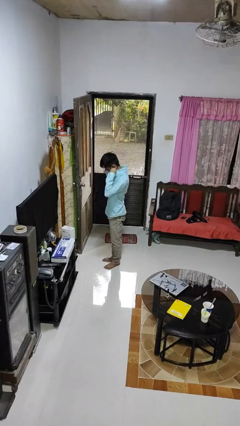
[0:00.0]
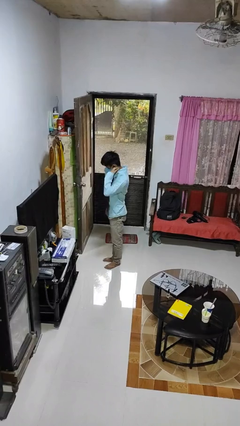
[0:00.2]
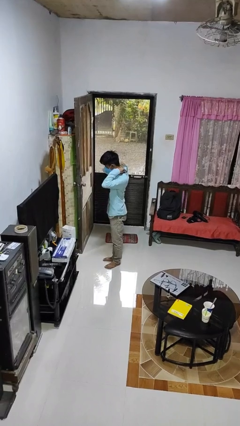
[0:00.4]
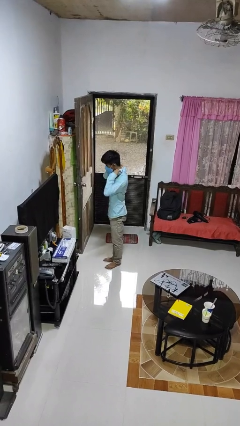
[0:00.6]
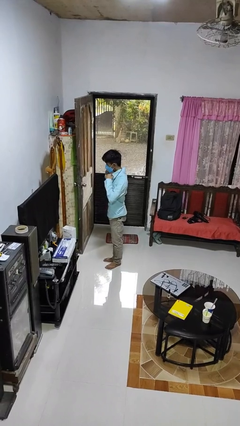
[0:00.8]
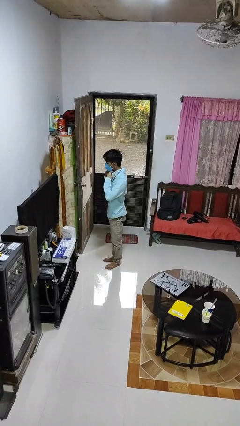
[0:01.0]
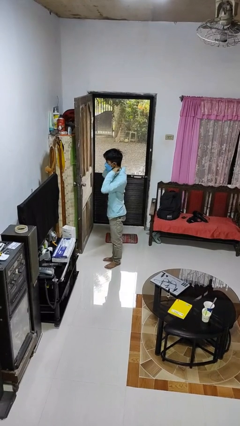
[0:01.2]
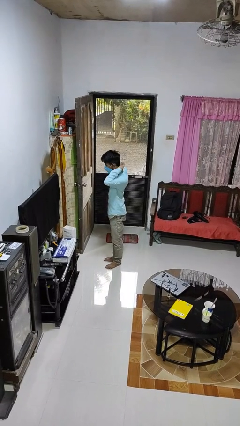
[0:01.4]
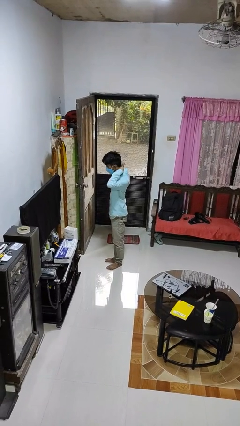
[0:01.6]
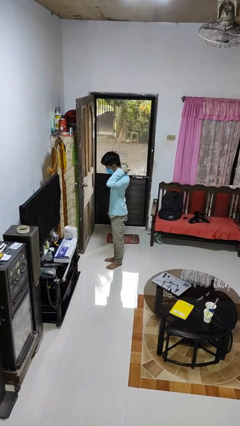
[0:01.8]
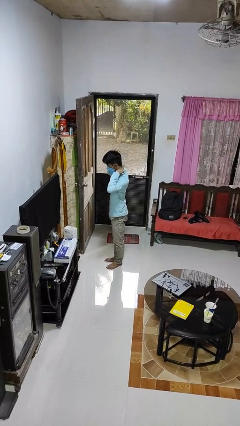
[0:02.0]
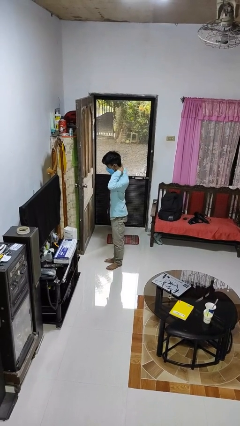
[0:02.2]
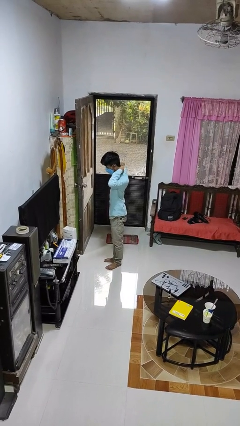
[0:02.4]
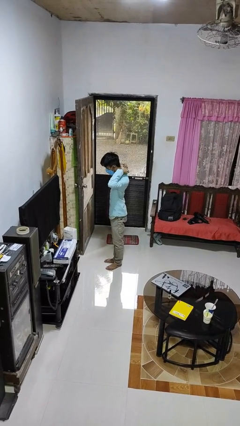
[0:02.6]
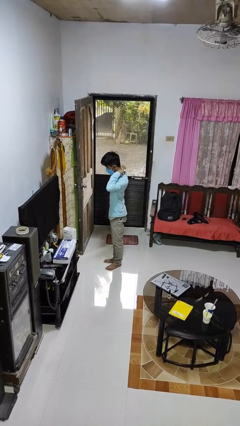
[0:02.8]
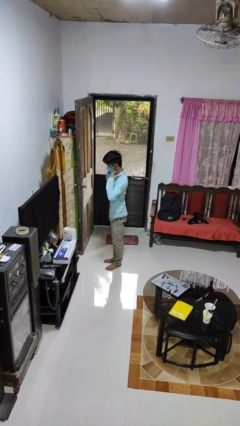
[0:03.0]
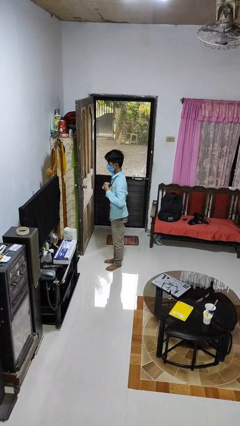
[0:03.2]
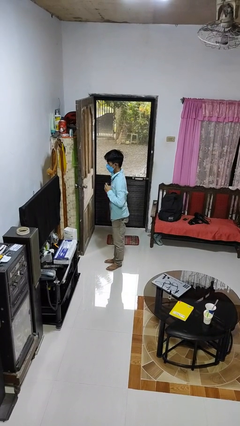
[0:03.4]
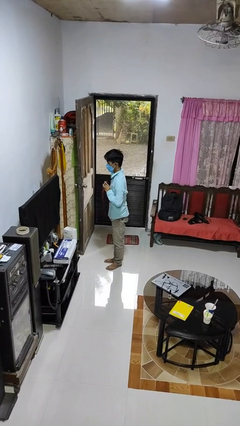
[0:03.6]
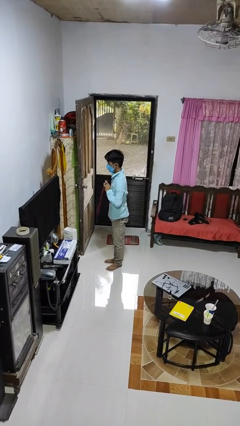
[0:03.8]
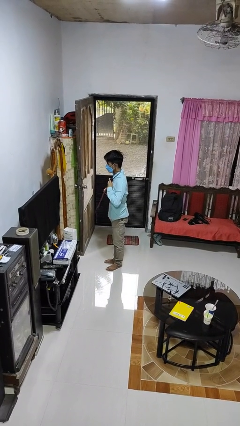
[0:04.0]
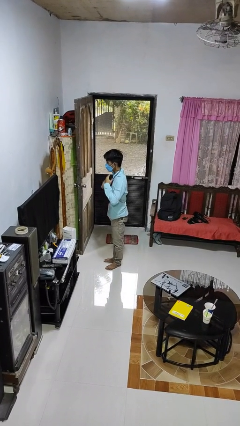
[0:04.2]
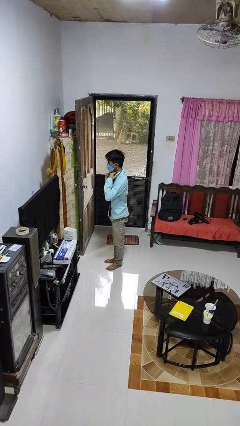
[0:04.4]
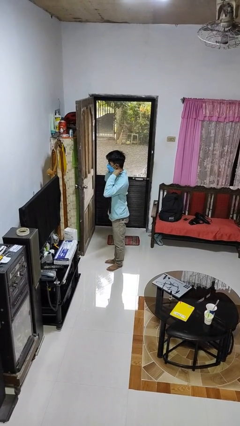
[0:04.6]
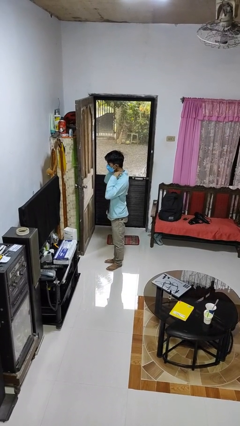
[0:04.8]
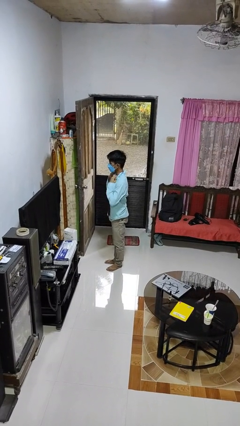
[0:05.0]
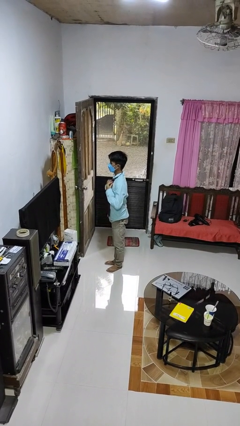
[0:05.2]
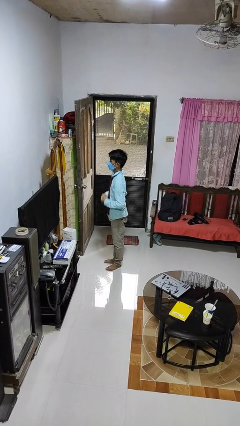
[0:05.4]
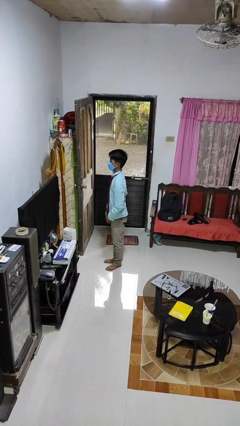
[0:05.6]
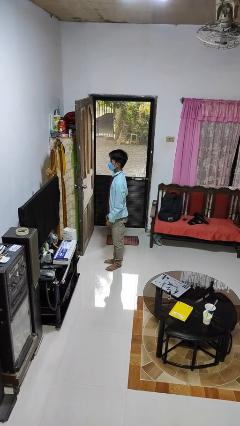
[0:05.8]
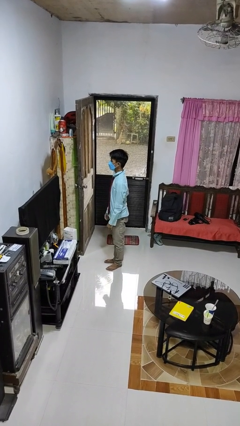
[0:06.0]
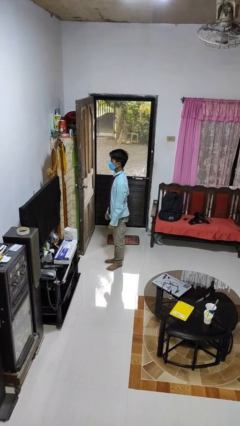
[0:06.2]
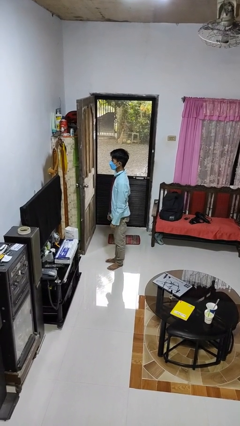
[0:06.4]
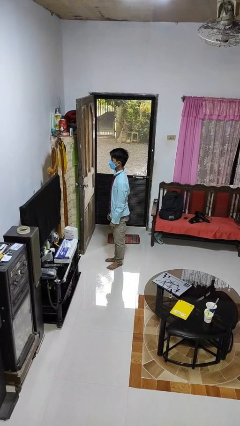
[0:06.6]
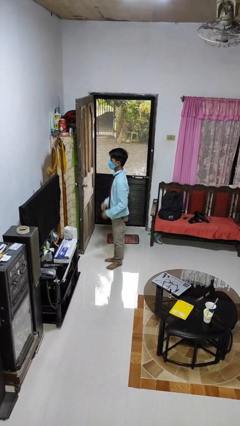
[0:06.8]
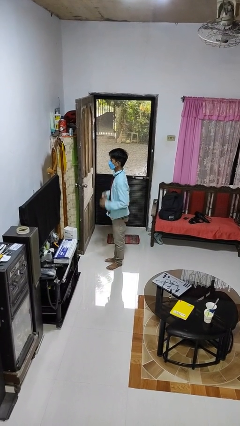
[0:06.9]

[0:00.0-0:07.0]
person puts on necktie

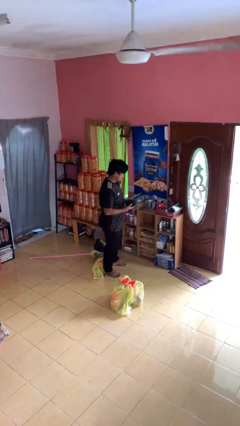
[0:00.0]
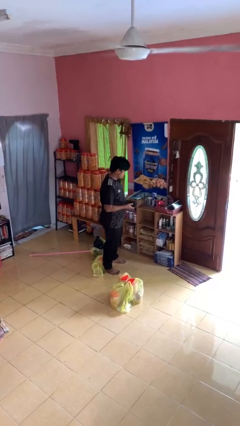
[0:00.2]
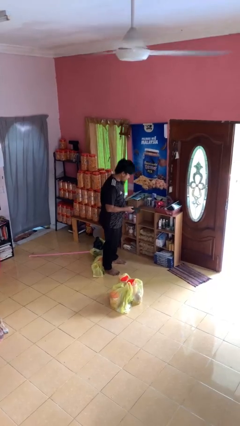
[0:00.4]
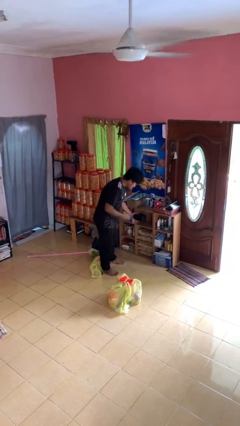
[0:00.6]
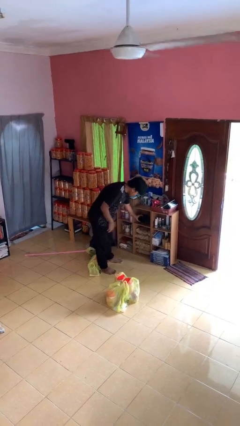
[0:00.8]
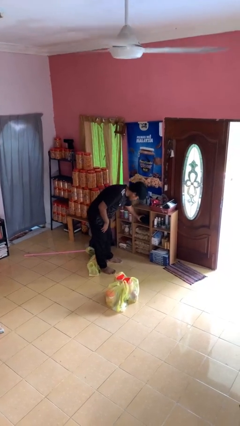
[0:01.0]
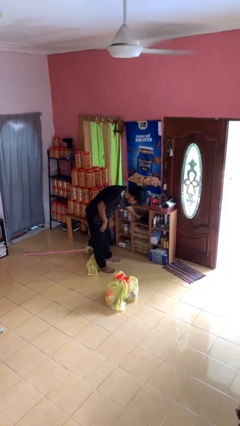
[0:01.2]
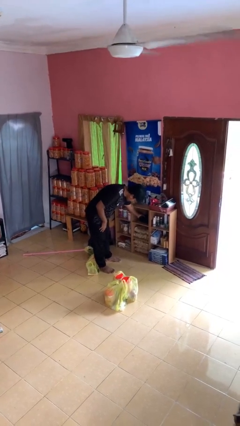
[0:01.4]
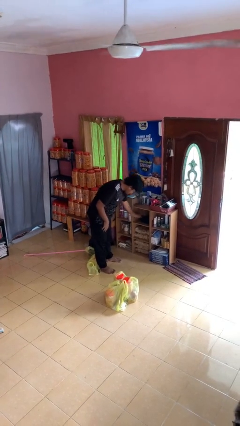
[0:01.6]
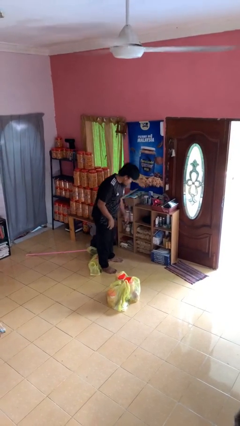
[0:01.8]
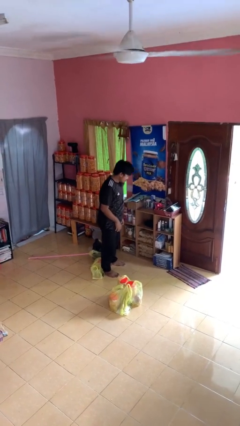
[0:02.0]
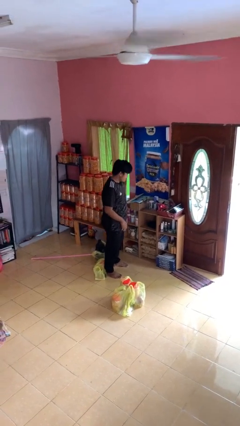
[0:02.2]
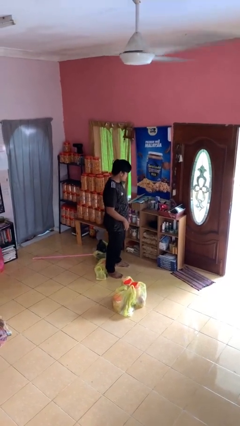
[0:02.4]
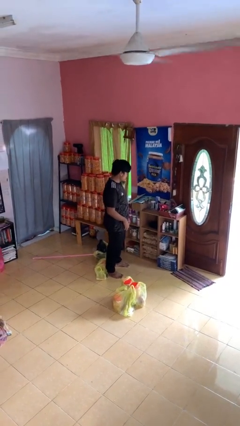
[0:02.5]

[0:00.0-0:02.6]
person puts object in cabinet

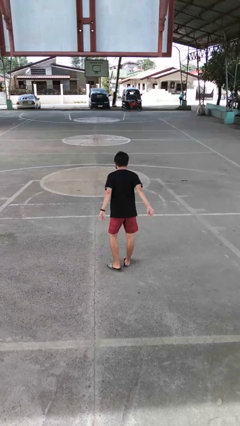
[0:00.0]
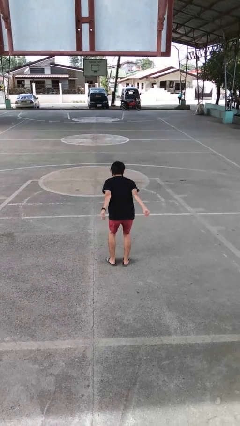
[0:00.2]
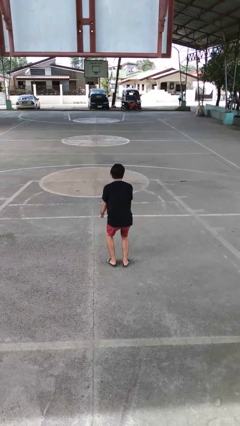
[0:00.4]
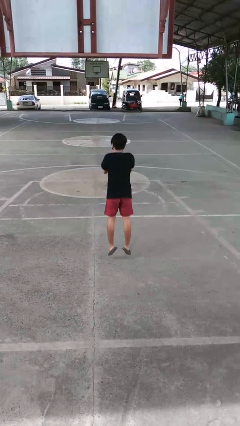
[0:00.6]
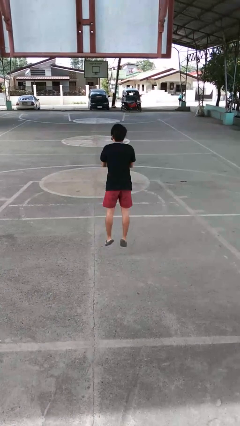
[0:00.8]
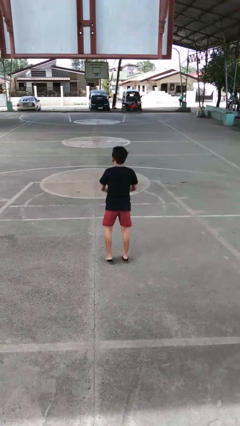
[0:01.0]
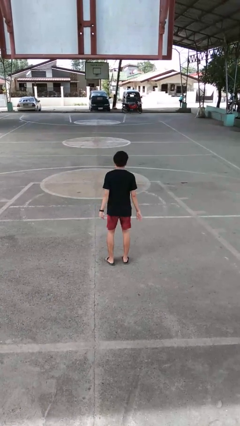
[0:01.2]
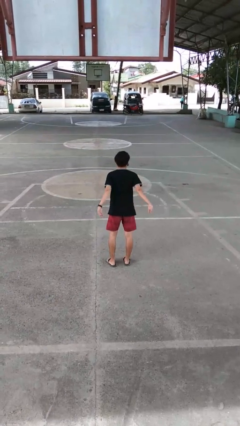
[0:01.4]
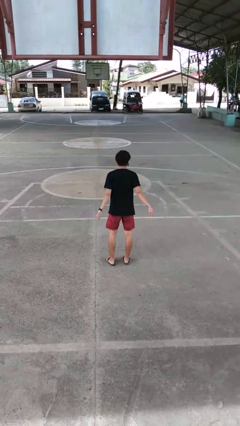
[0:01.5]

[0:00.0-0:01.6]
person jumps

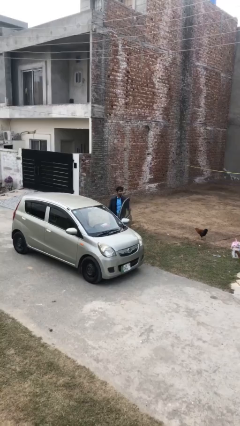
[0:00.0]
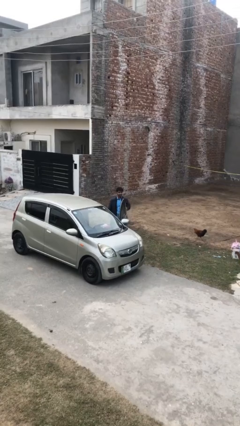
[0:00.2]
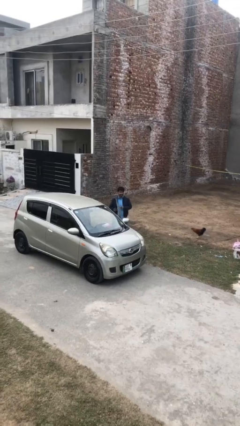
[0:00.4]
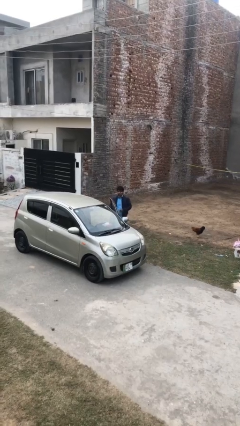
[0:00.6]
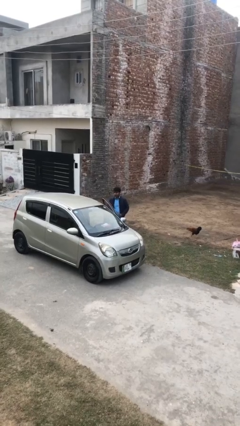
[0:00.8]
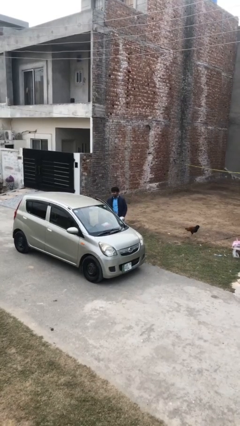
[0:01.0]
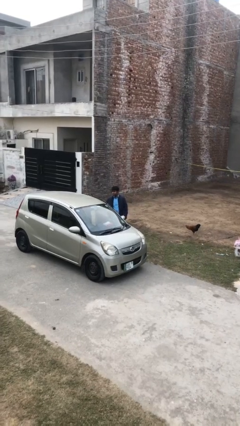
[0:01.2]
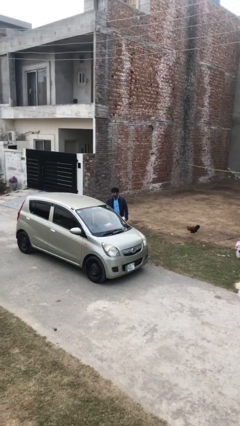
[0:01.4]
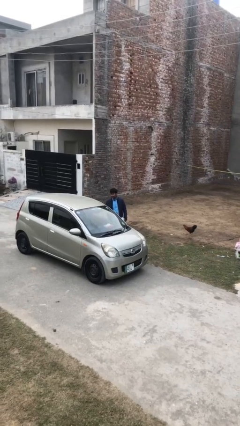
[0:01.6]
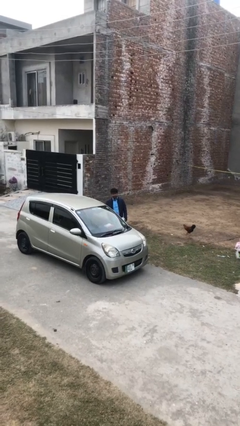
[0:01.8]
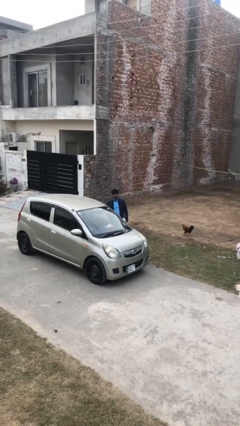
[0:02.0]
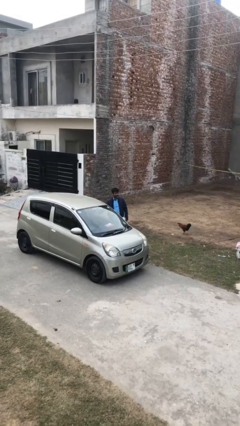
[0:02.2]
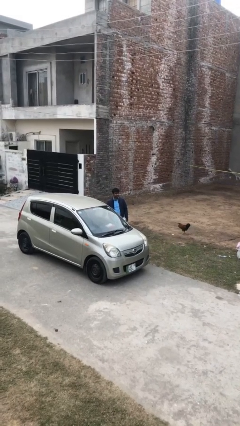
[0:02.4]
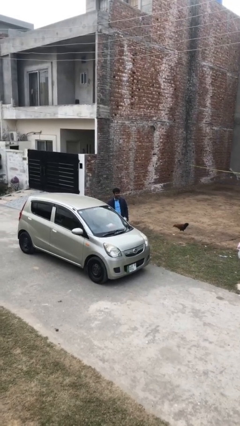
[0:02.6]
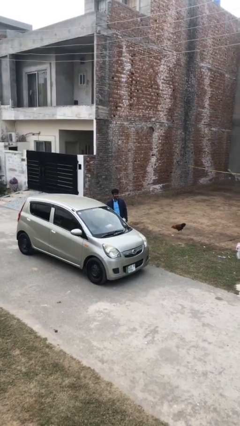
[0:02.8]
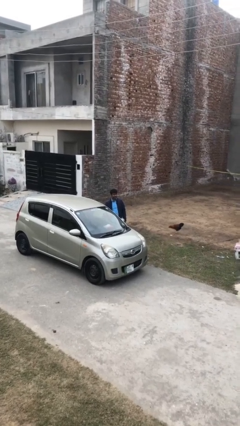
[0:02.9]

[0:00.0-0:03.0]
person closes car door

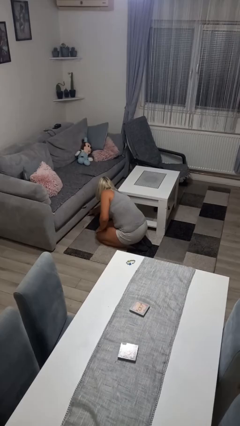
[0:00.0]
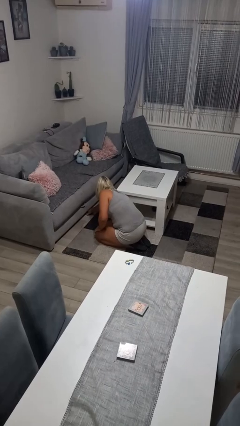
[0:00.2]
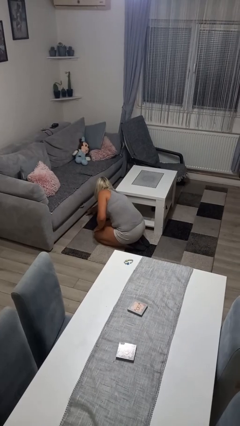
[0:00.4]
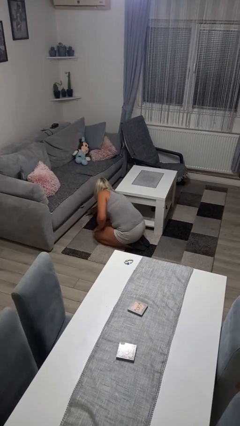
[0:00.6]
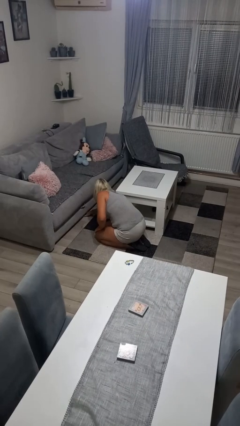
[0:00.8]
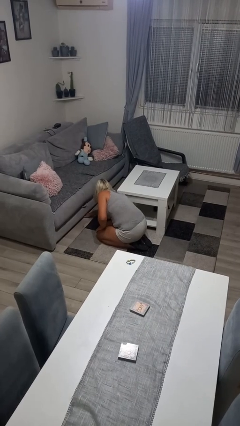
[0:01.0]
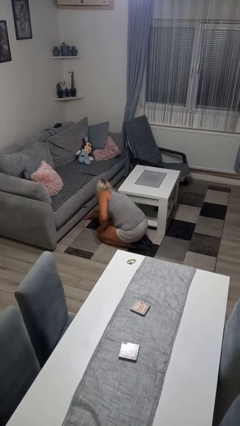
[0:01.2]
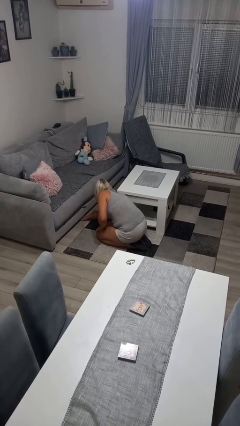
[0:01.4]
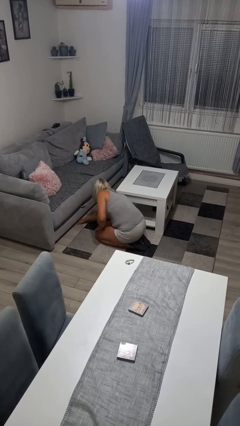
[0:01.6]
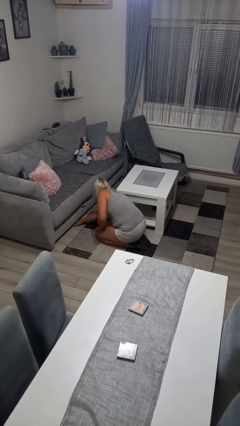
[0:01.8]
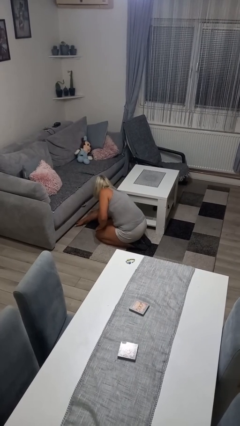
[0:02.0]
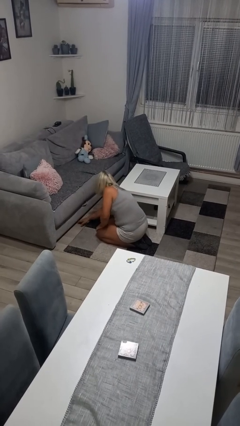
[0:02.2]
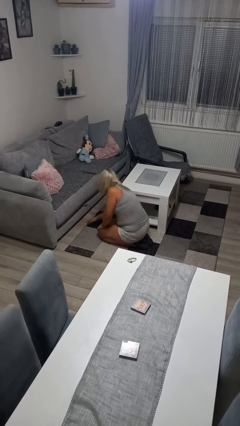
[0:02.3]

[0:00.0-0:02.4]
person searches under couch

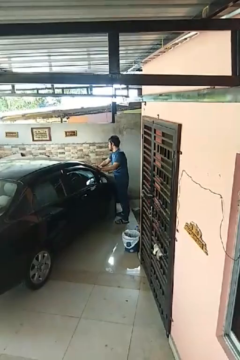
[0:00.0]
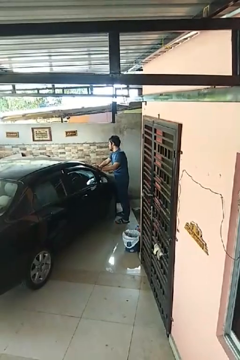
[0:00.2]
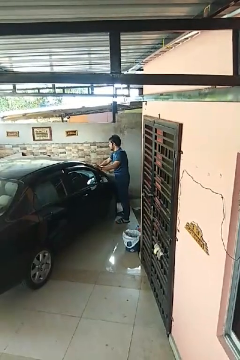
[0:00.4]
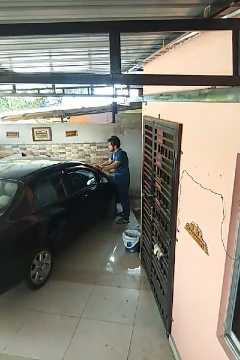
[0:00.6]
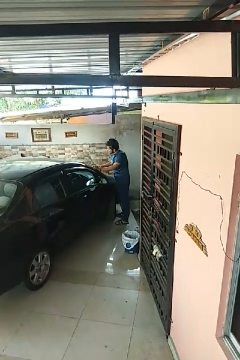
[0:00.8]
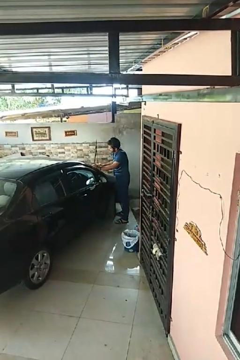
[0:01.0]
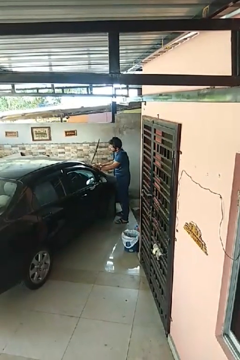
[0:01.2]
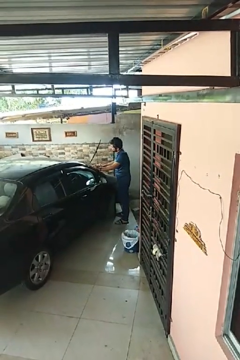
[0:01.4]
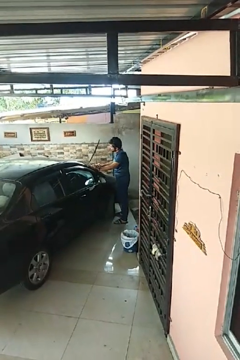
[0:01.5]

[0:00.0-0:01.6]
person flips up car wipers
